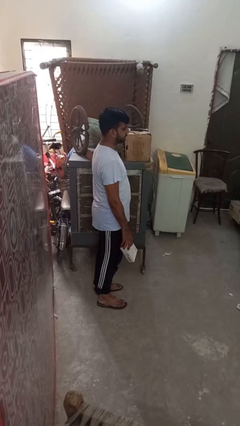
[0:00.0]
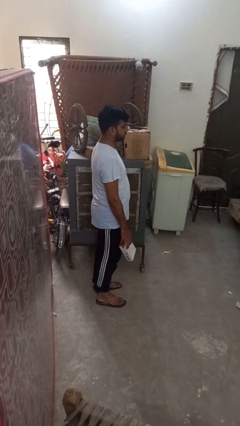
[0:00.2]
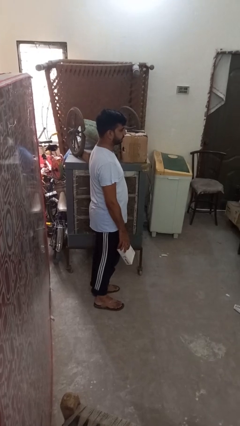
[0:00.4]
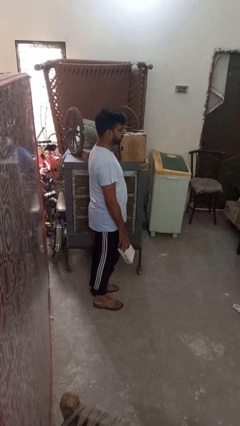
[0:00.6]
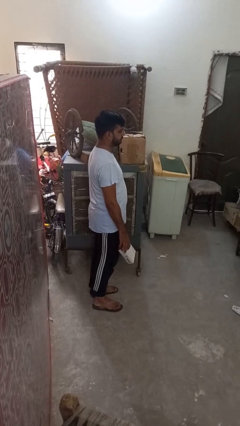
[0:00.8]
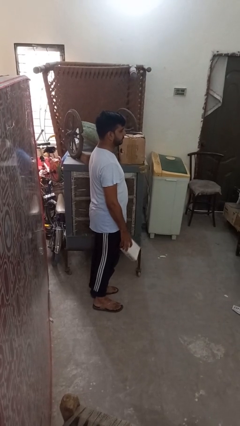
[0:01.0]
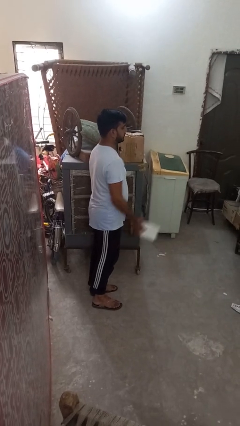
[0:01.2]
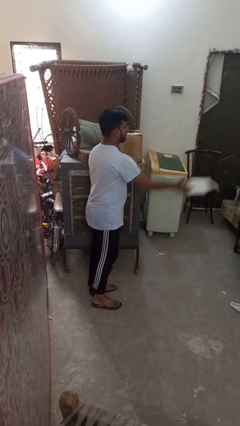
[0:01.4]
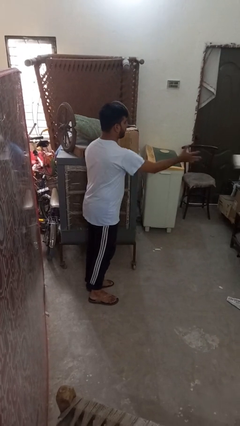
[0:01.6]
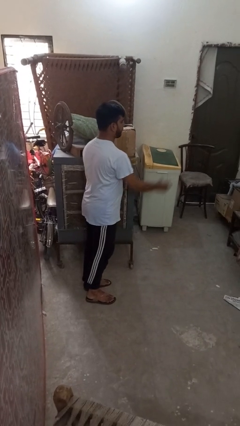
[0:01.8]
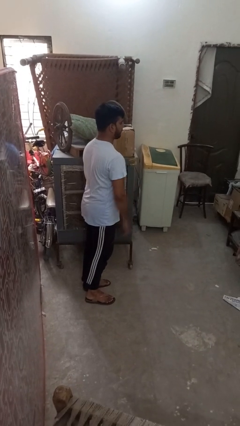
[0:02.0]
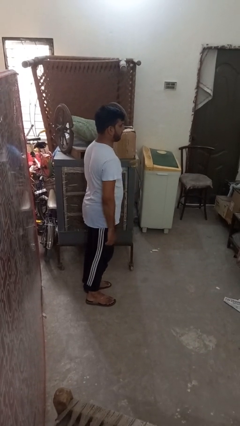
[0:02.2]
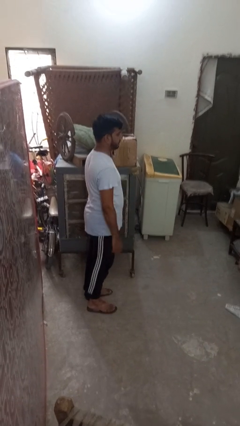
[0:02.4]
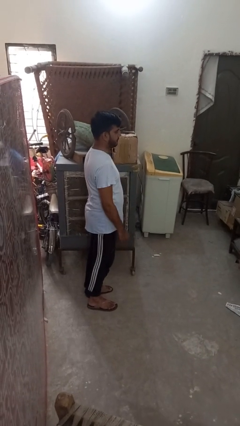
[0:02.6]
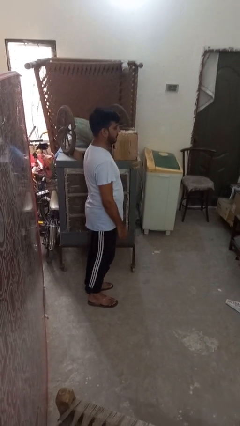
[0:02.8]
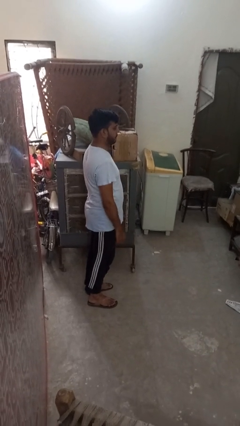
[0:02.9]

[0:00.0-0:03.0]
person throws object on table

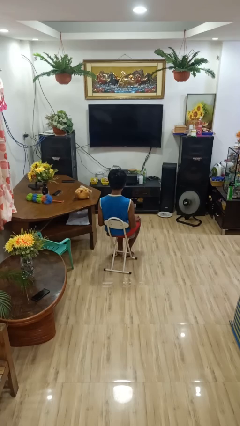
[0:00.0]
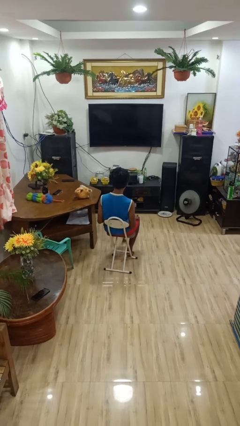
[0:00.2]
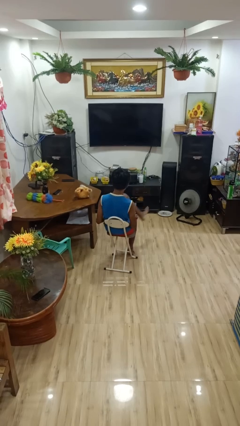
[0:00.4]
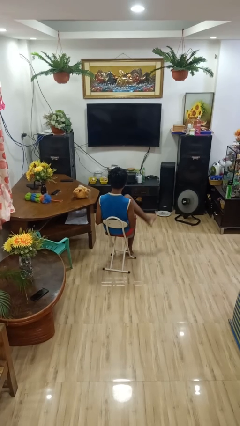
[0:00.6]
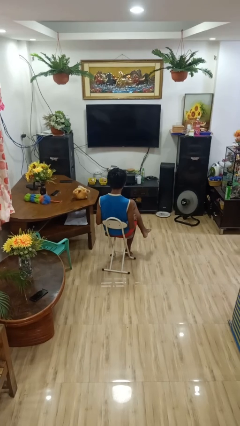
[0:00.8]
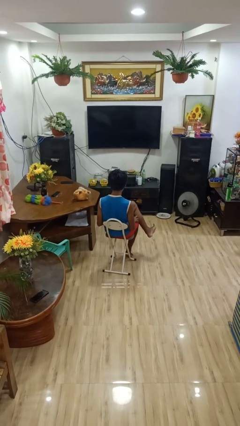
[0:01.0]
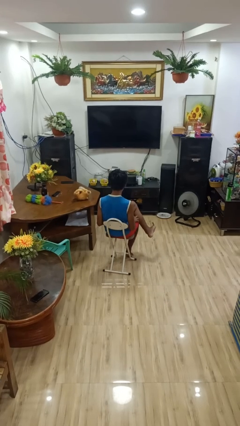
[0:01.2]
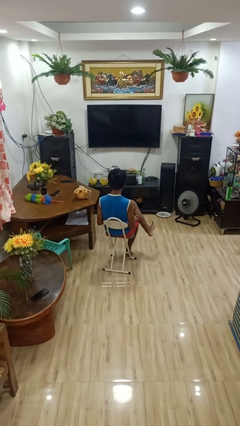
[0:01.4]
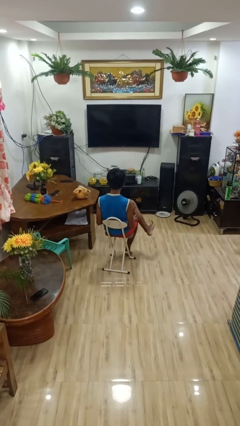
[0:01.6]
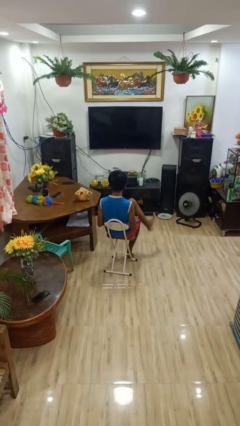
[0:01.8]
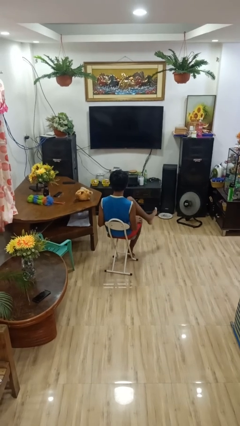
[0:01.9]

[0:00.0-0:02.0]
person crosses legs

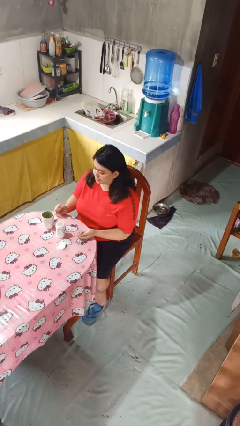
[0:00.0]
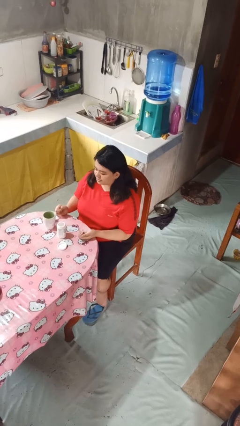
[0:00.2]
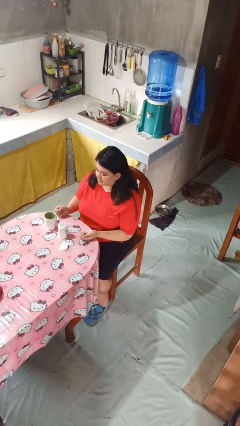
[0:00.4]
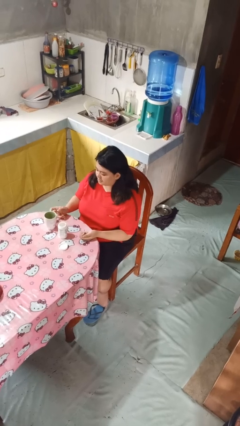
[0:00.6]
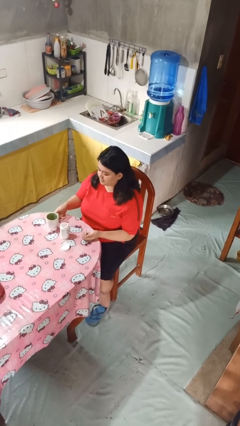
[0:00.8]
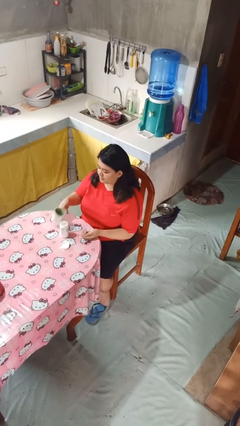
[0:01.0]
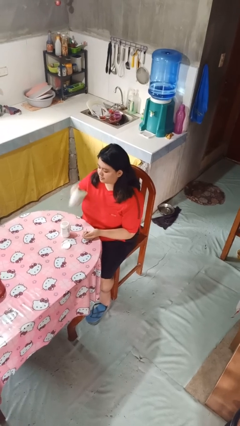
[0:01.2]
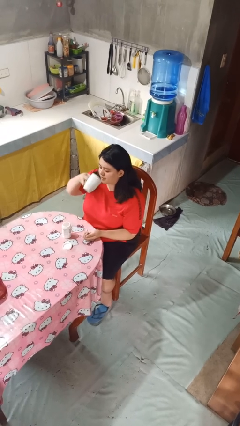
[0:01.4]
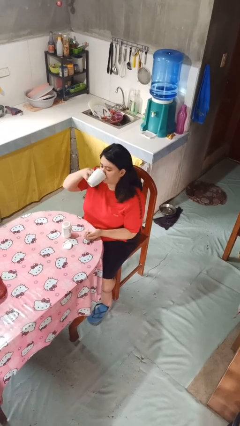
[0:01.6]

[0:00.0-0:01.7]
person drinks from cup

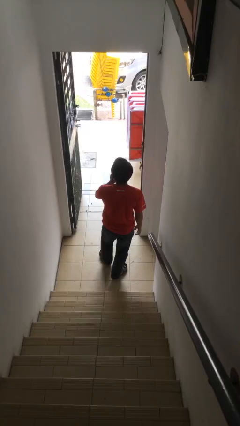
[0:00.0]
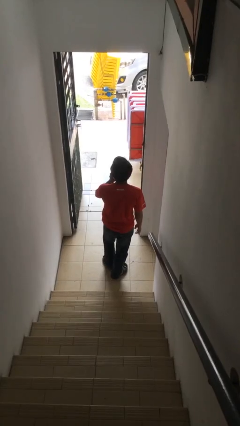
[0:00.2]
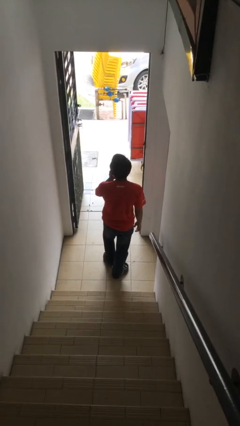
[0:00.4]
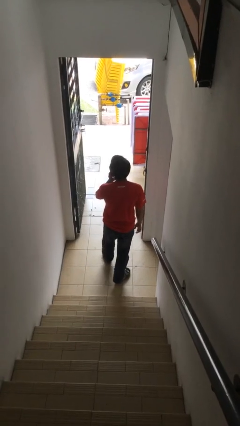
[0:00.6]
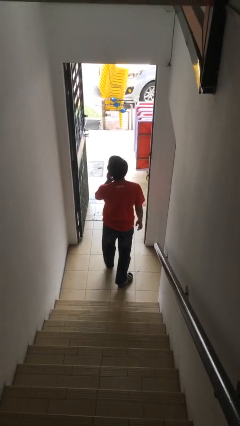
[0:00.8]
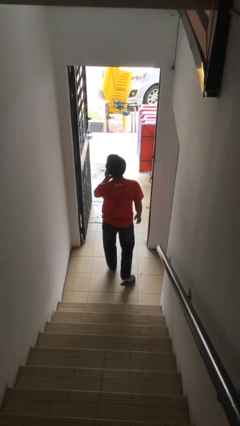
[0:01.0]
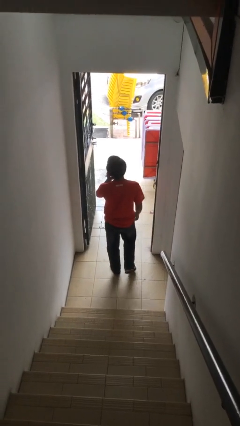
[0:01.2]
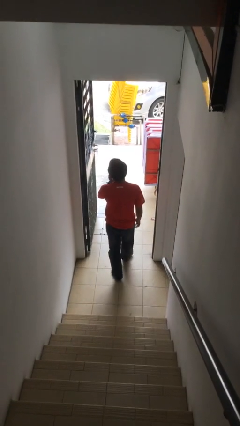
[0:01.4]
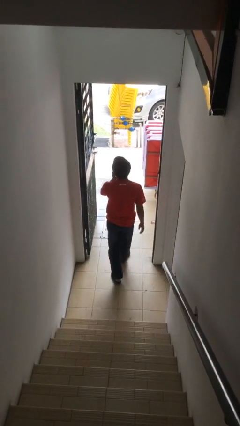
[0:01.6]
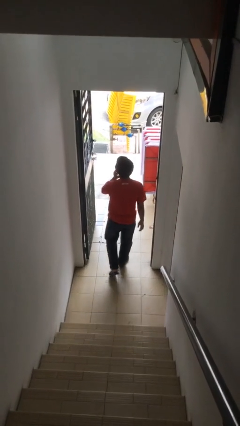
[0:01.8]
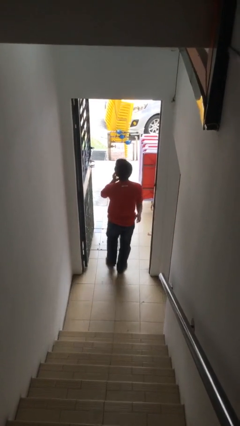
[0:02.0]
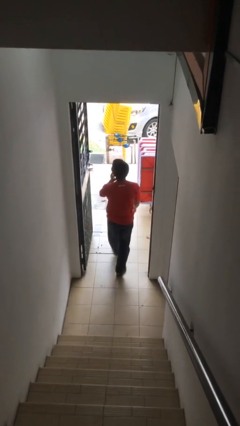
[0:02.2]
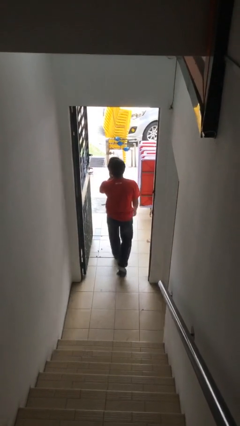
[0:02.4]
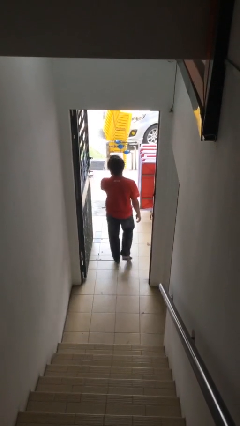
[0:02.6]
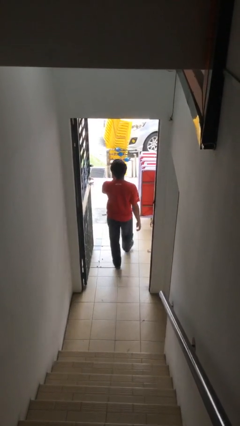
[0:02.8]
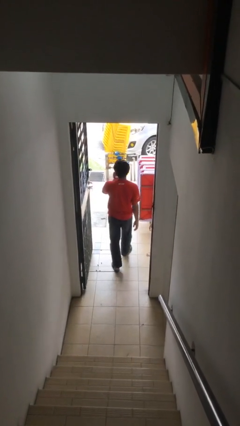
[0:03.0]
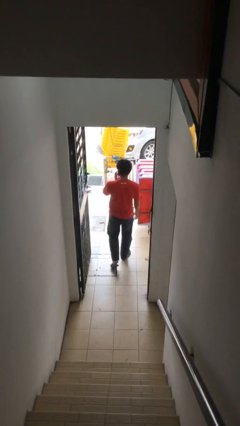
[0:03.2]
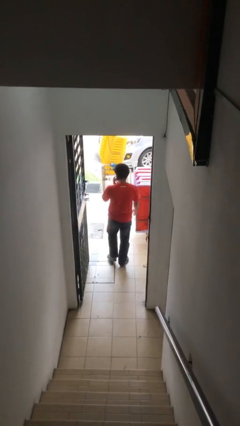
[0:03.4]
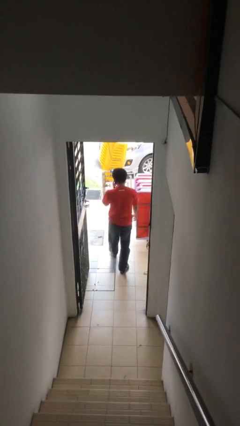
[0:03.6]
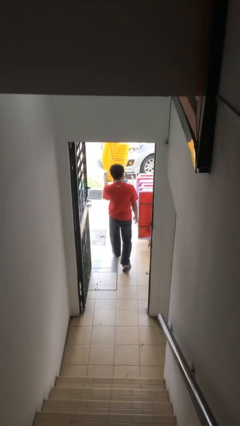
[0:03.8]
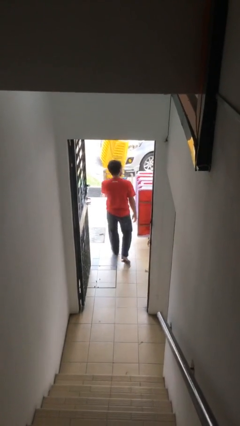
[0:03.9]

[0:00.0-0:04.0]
person exits scene through structure

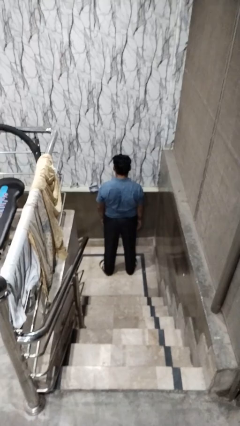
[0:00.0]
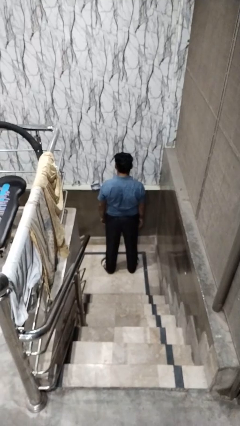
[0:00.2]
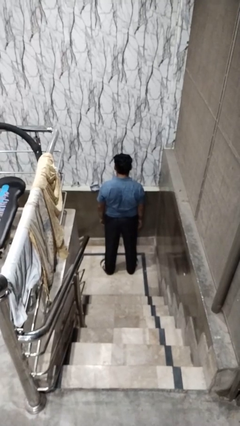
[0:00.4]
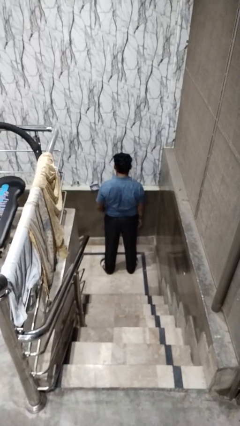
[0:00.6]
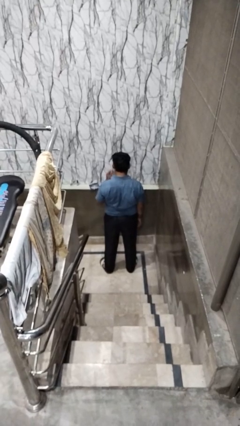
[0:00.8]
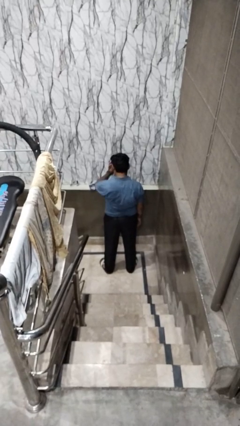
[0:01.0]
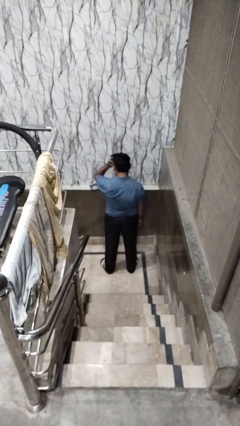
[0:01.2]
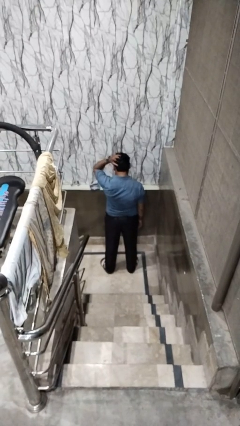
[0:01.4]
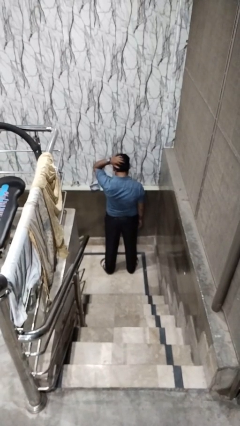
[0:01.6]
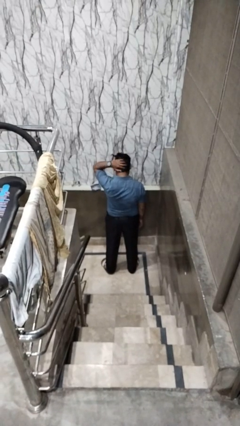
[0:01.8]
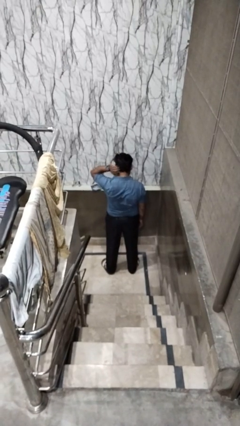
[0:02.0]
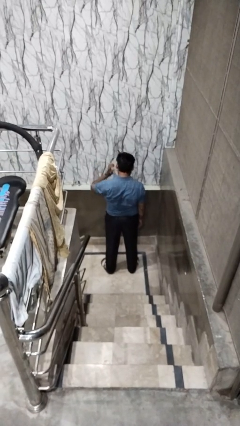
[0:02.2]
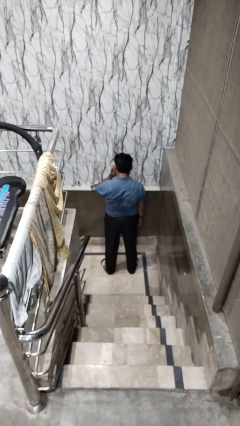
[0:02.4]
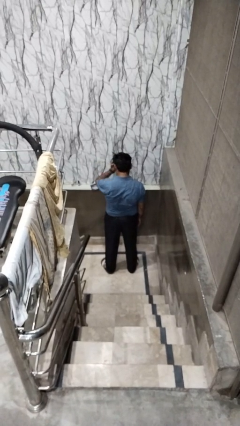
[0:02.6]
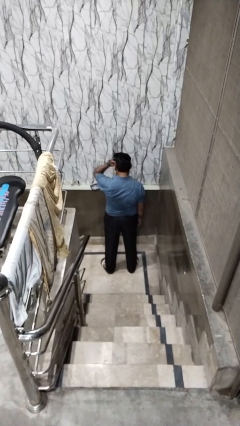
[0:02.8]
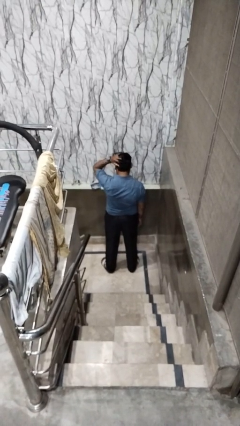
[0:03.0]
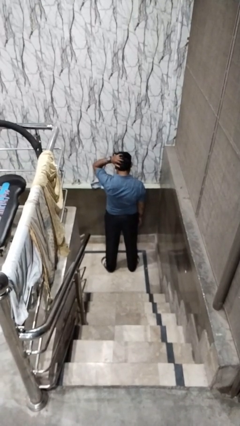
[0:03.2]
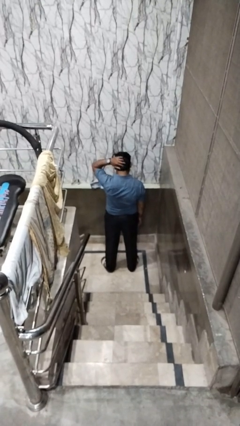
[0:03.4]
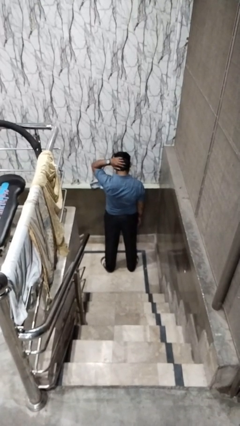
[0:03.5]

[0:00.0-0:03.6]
person strokes hair

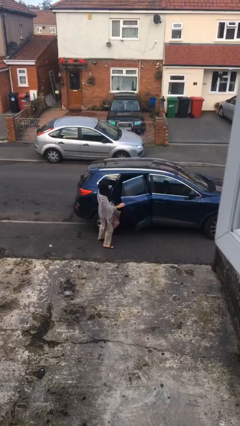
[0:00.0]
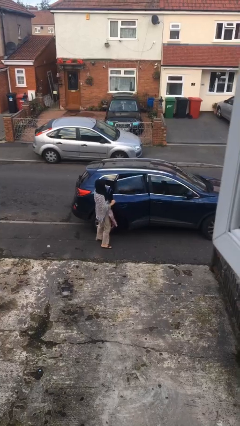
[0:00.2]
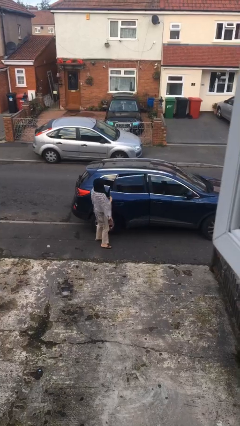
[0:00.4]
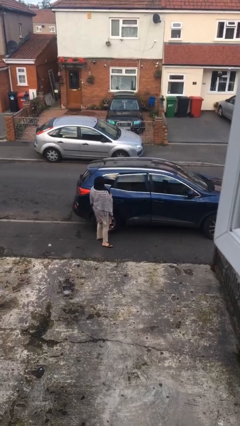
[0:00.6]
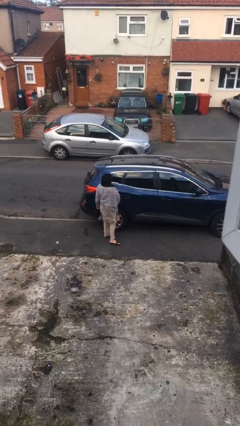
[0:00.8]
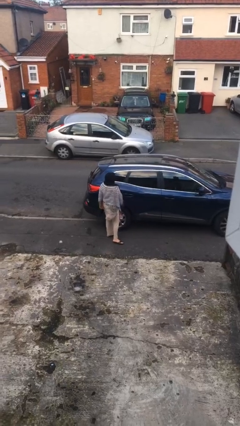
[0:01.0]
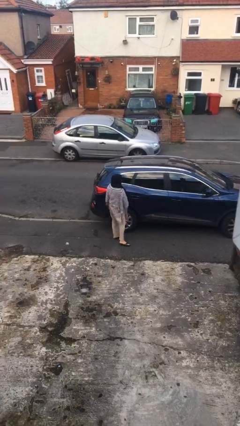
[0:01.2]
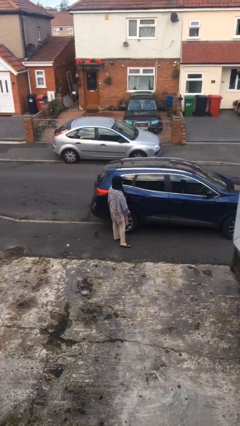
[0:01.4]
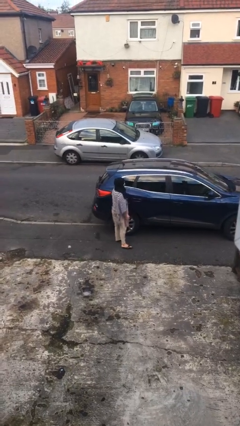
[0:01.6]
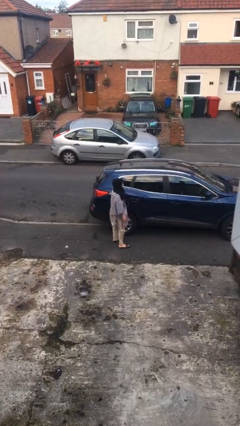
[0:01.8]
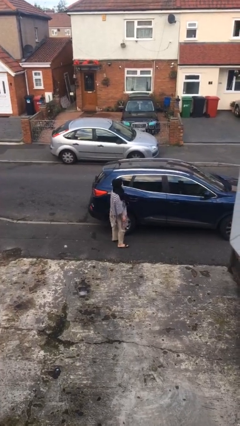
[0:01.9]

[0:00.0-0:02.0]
person closes car door

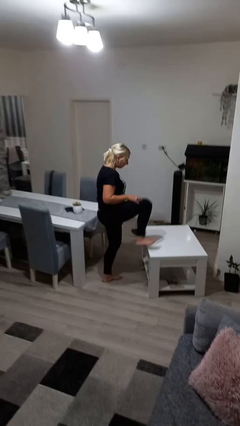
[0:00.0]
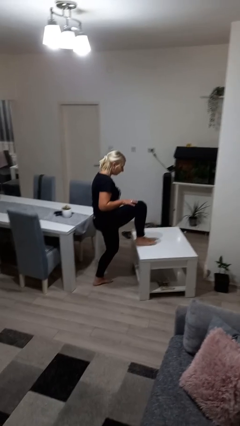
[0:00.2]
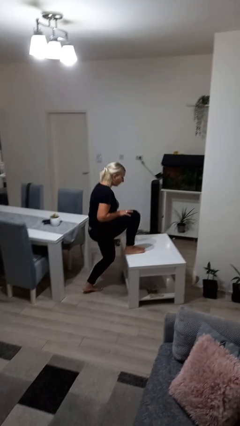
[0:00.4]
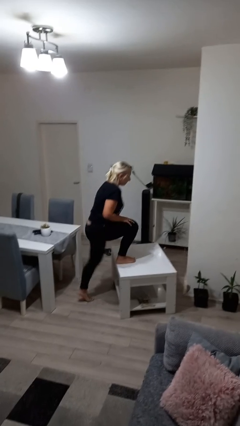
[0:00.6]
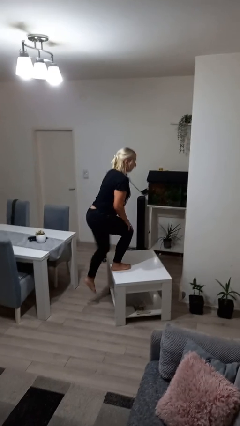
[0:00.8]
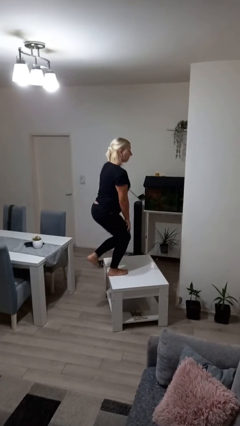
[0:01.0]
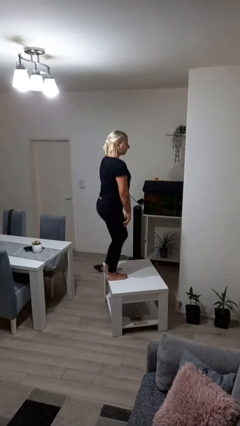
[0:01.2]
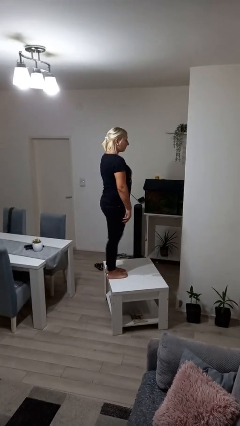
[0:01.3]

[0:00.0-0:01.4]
person climbs on table
